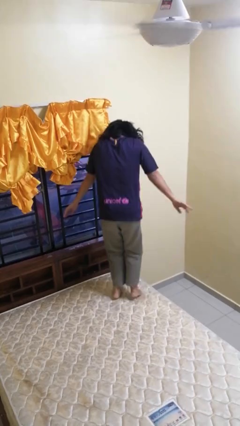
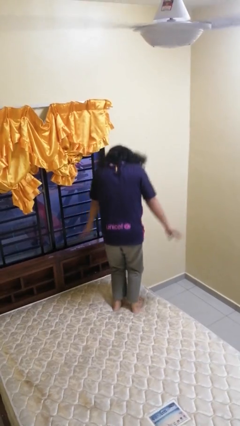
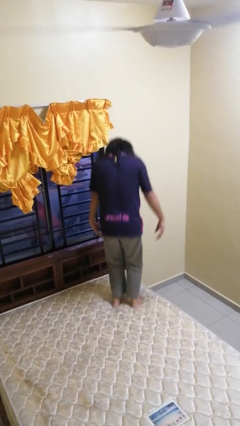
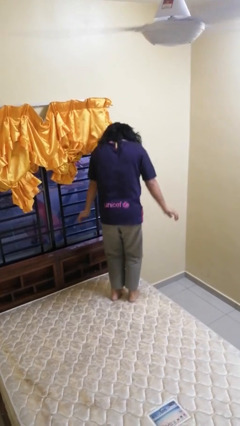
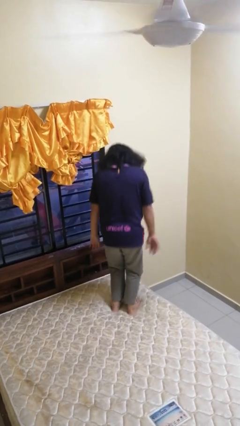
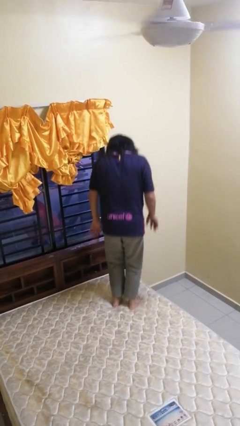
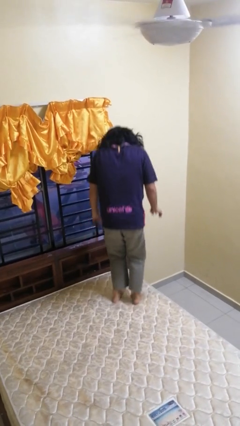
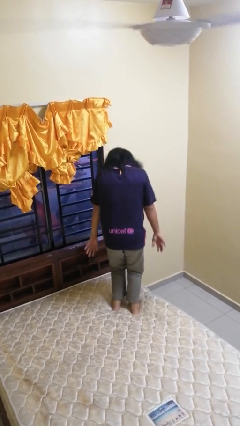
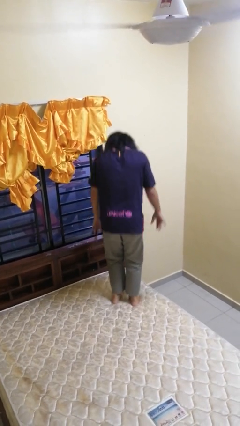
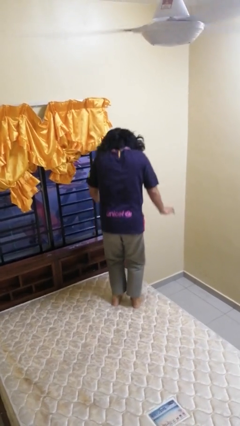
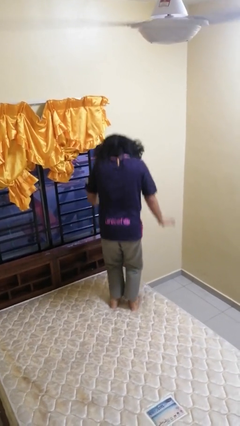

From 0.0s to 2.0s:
person jumps on bed

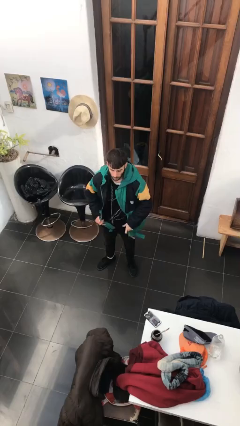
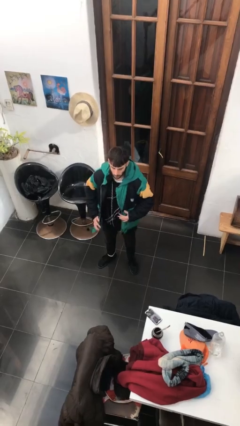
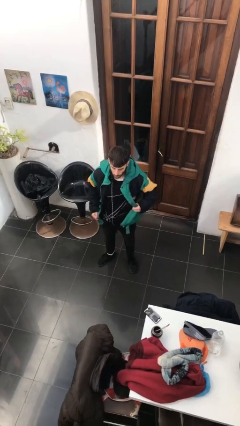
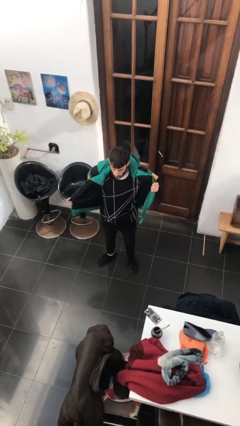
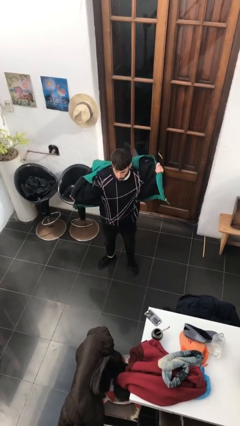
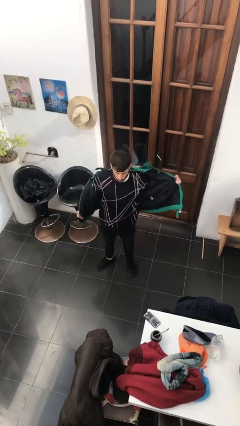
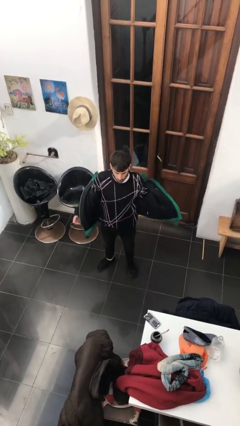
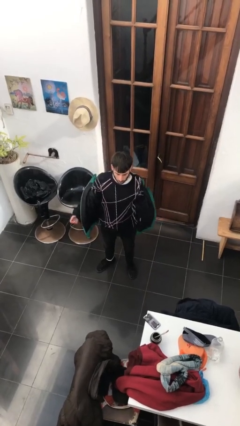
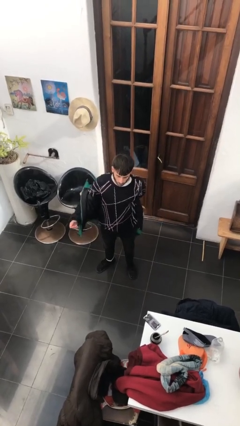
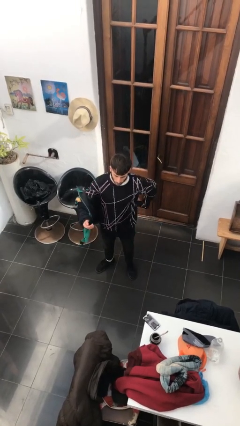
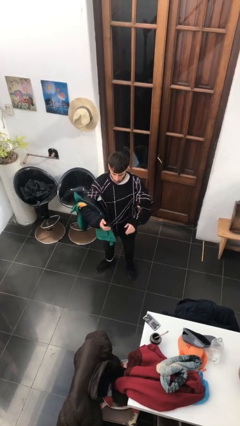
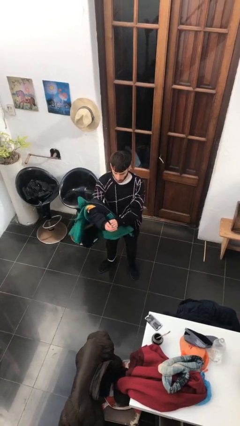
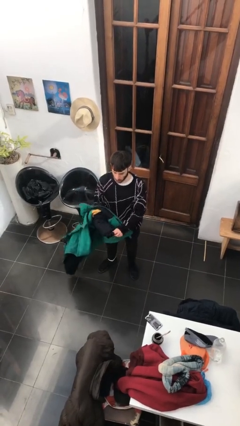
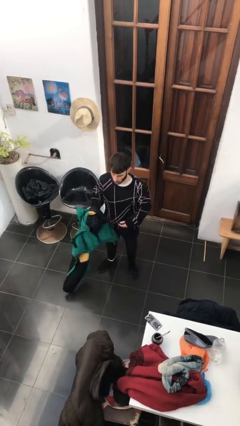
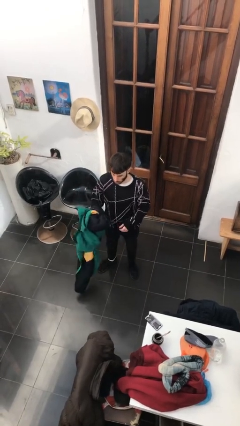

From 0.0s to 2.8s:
person takes off jacket

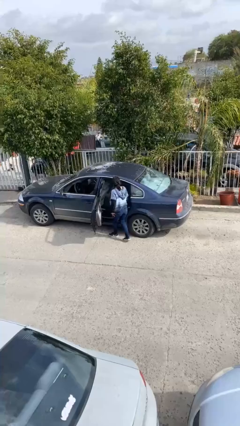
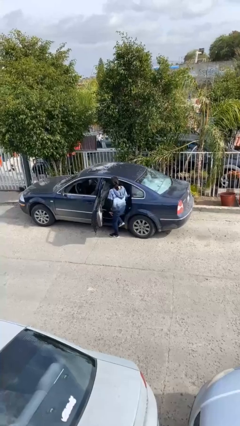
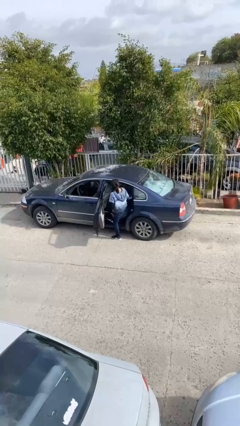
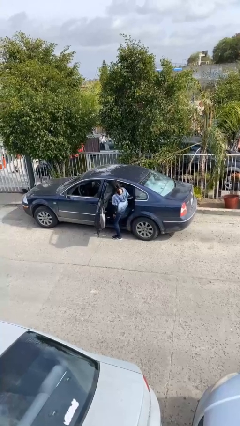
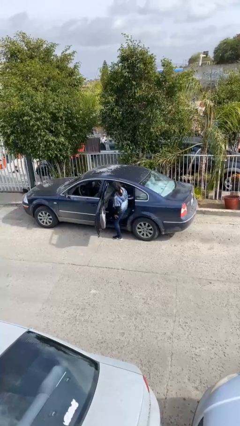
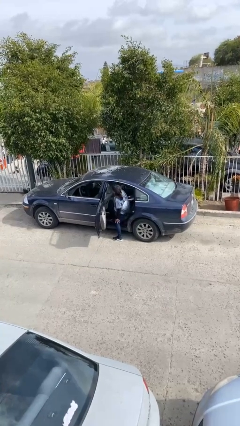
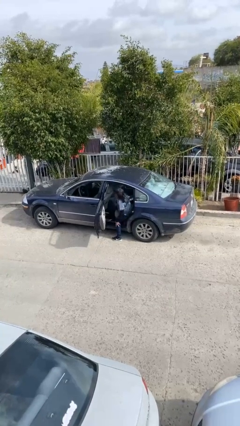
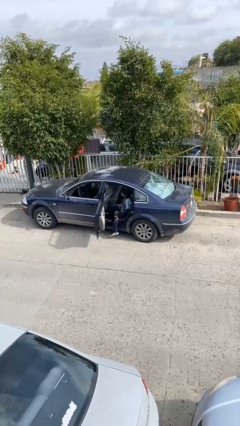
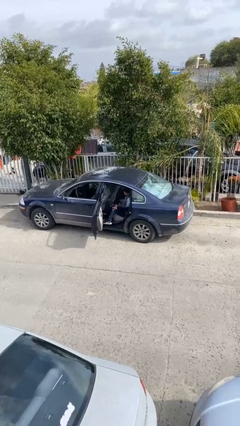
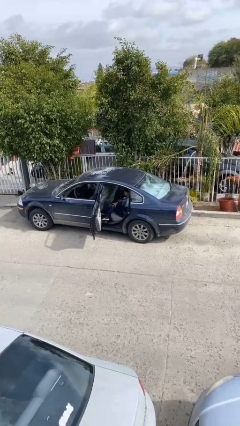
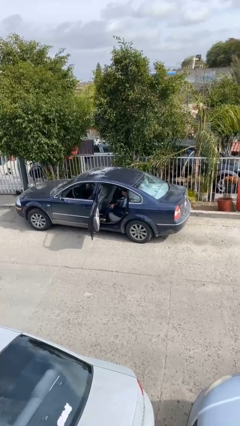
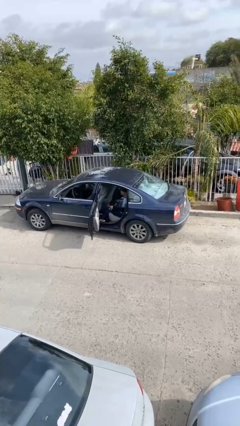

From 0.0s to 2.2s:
person enters car

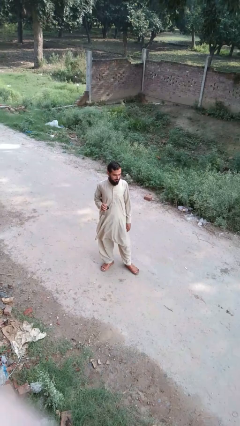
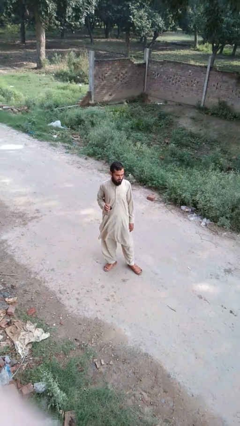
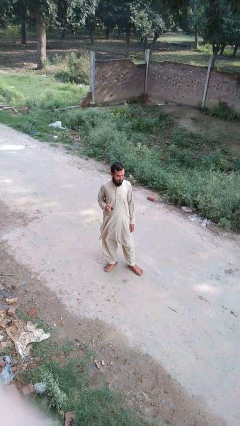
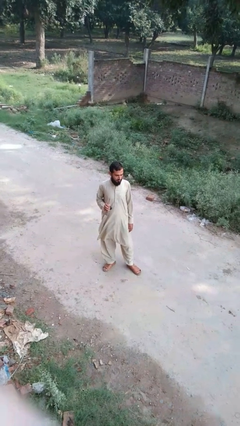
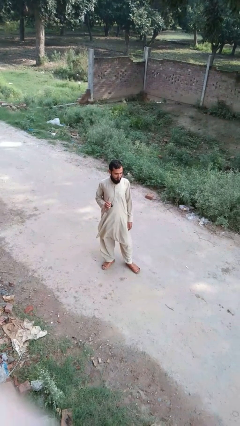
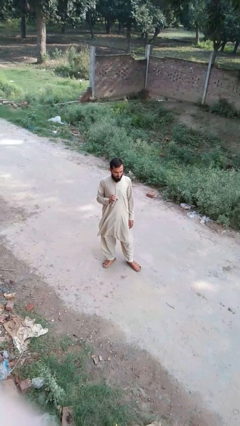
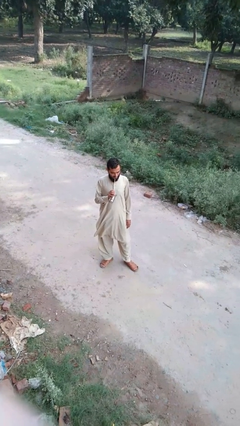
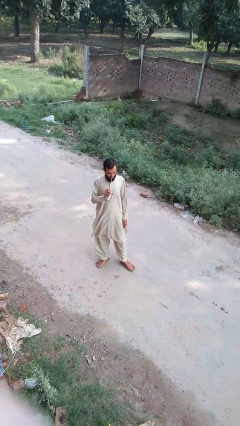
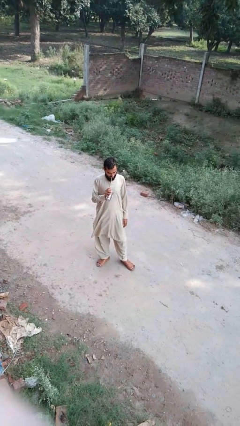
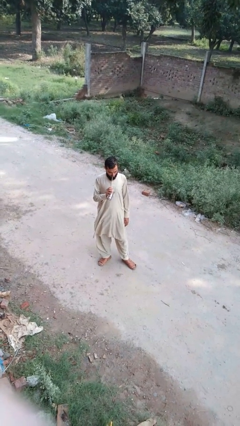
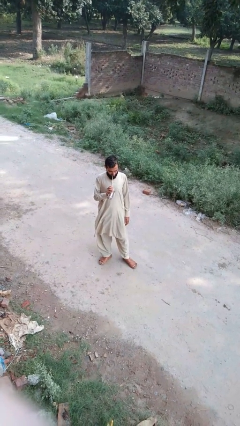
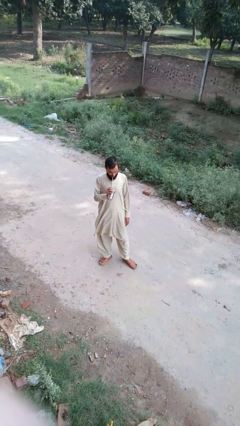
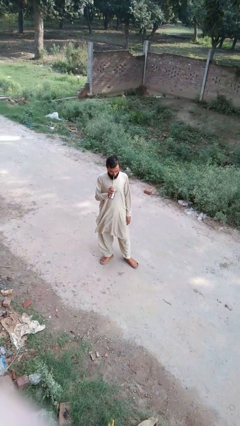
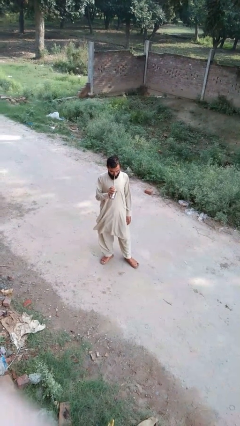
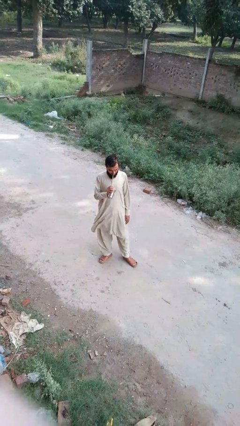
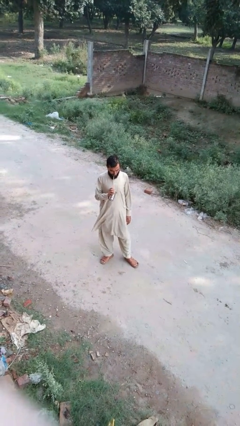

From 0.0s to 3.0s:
person drinks from straw

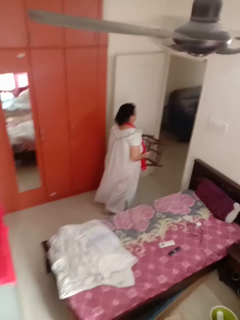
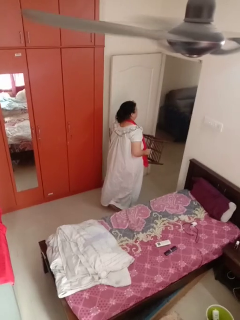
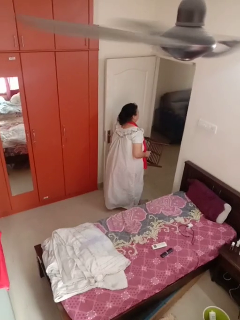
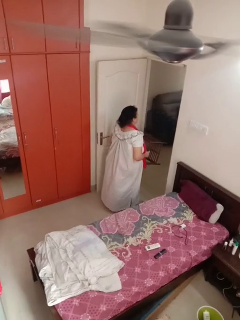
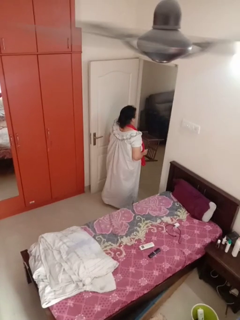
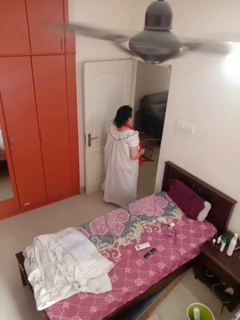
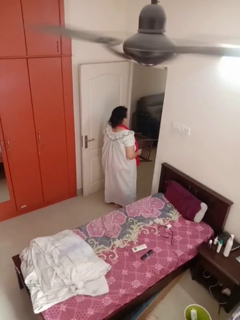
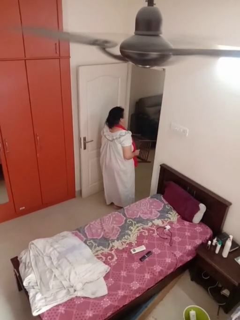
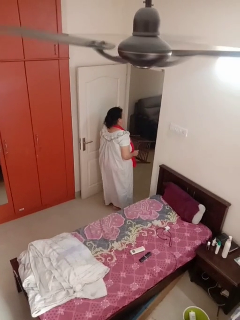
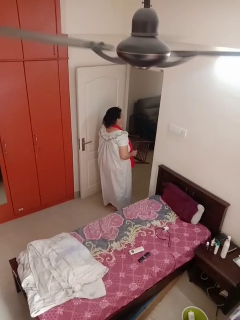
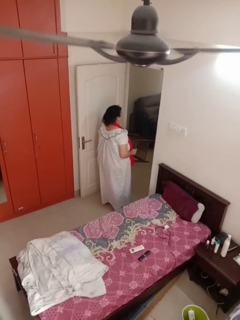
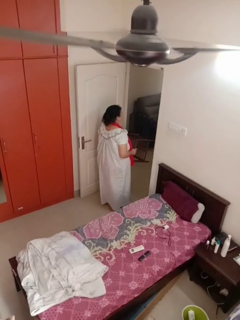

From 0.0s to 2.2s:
person carries furniture

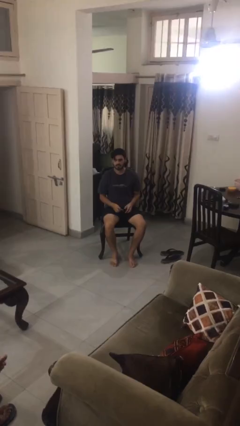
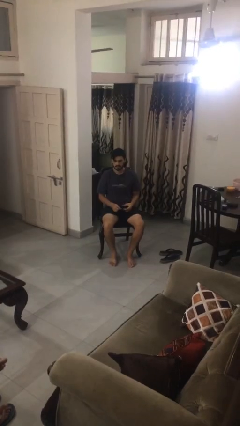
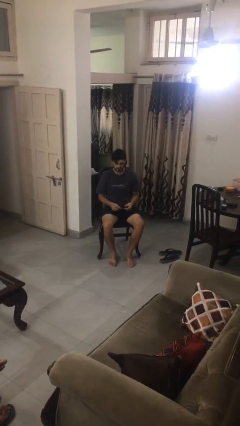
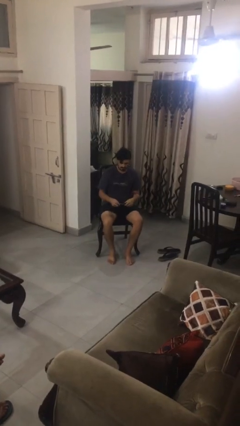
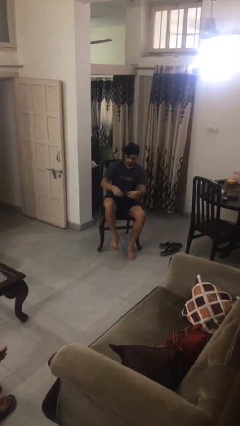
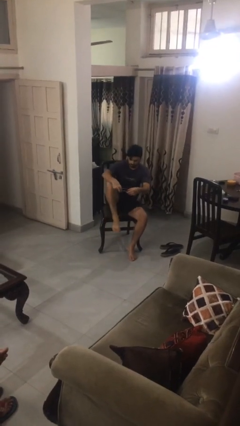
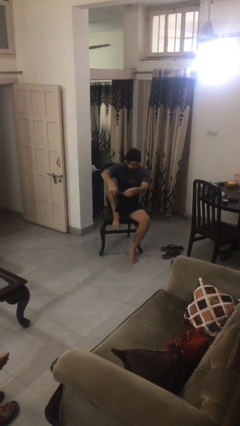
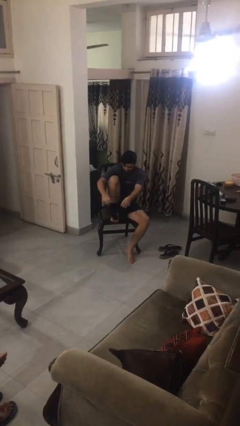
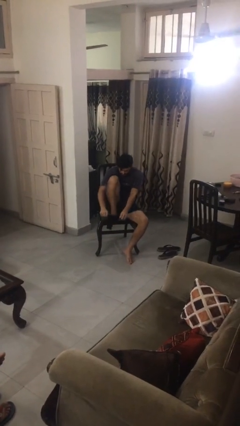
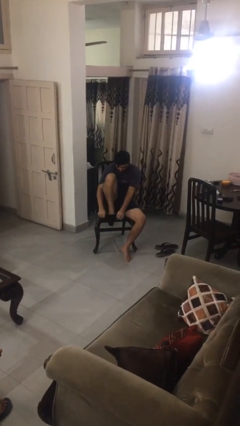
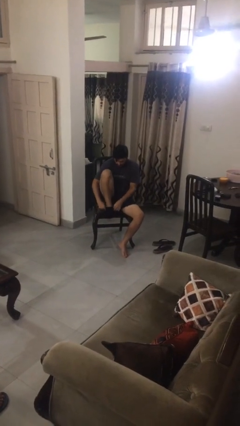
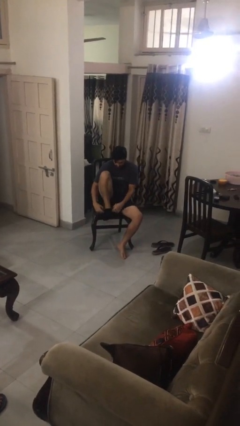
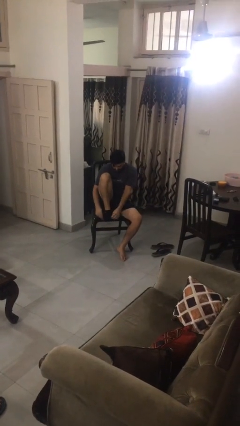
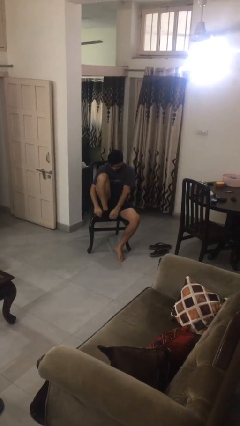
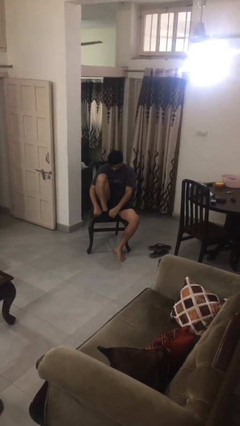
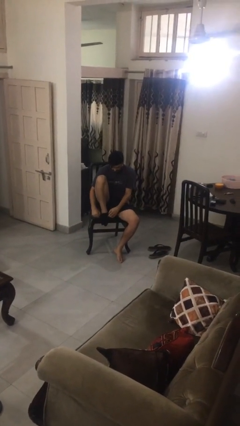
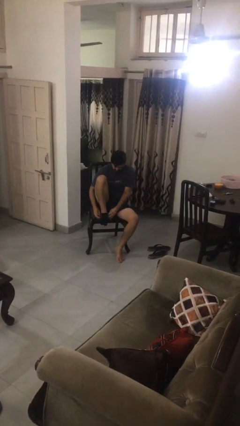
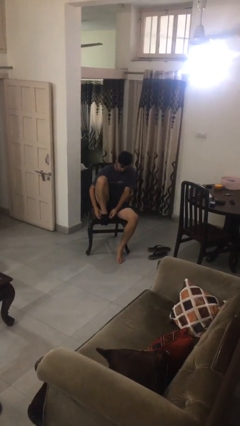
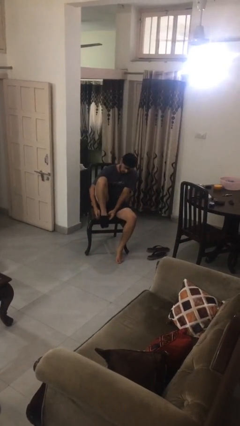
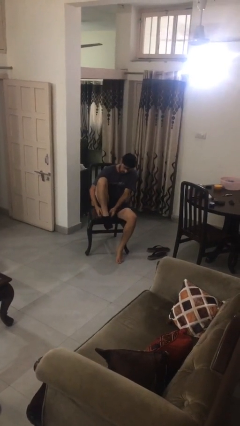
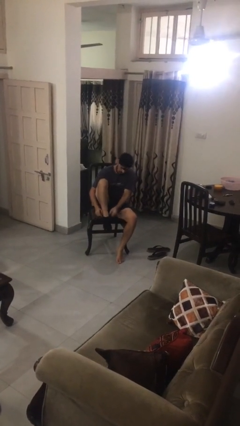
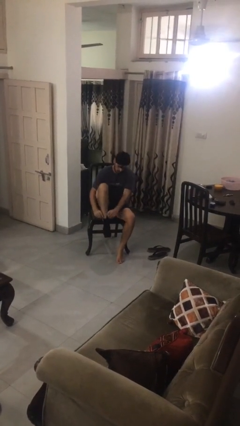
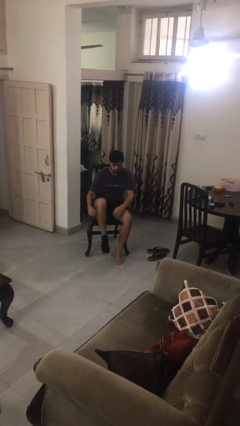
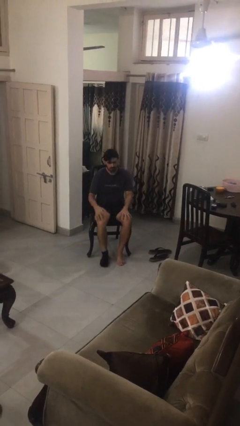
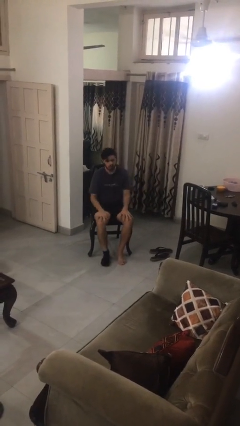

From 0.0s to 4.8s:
person puts on socks

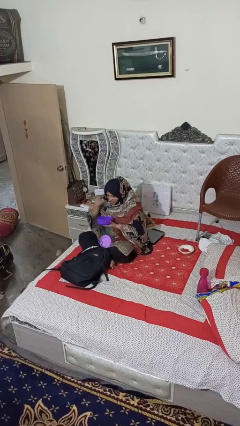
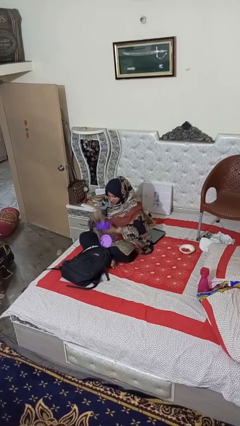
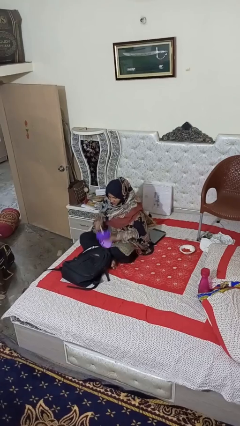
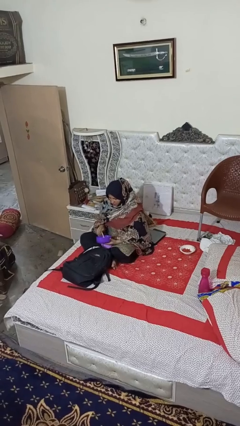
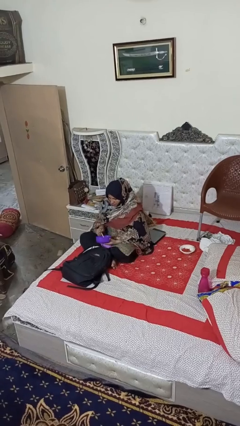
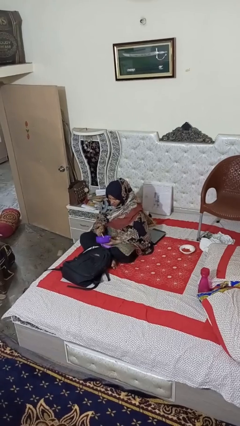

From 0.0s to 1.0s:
person eats snack from bag
